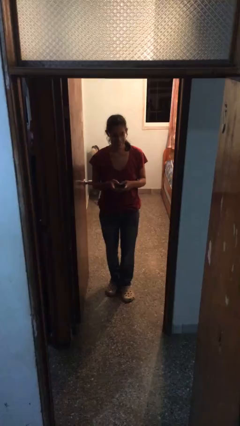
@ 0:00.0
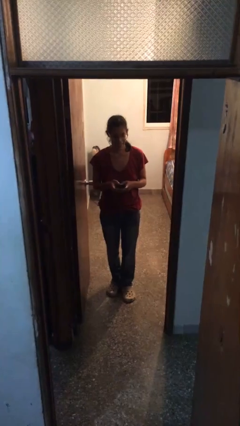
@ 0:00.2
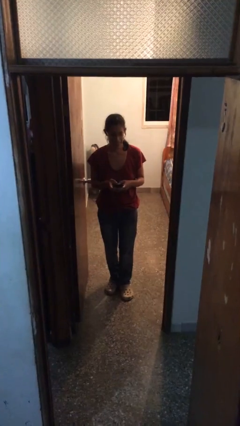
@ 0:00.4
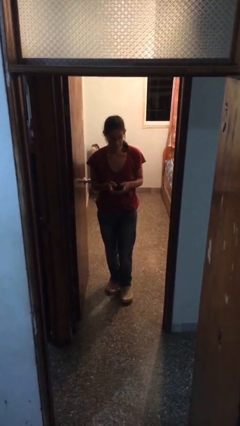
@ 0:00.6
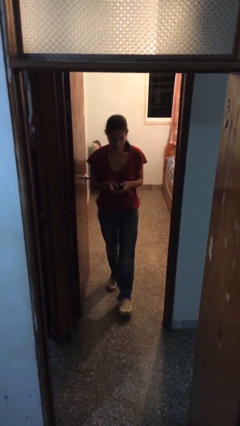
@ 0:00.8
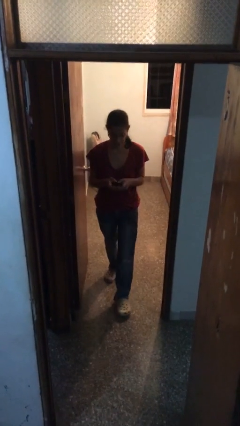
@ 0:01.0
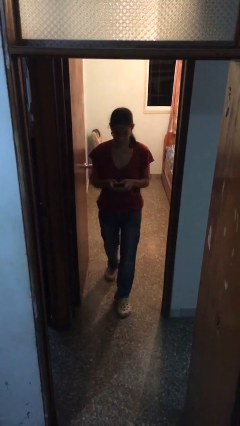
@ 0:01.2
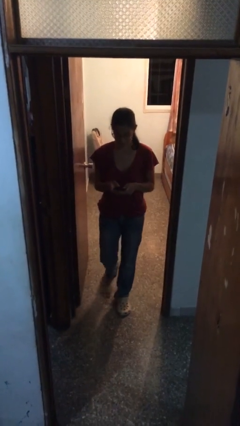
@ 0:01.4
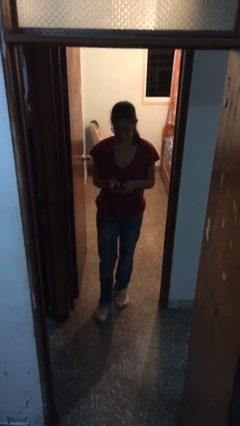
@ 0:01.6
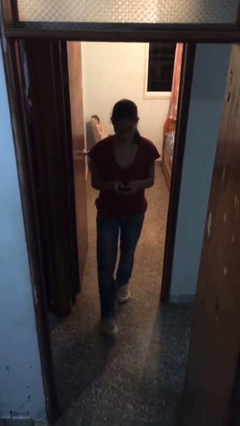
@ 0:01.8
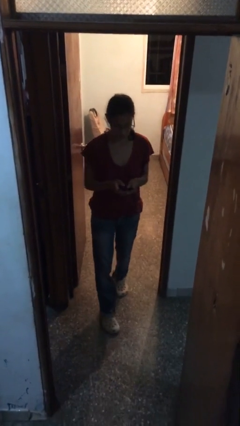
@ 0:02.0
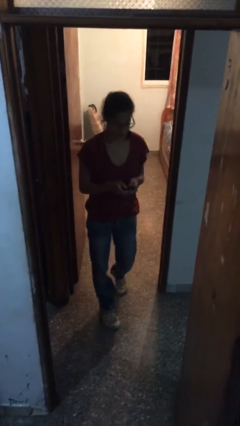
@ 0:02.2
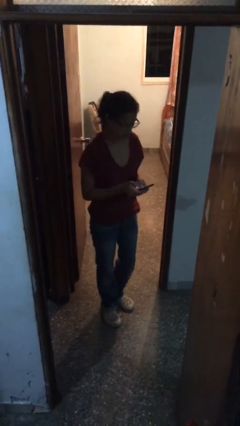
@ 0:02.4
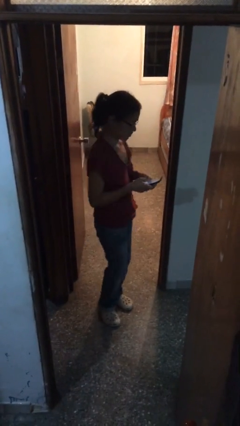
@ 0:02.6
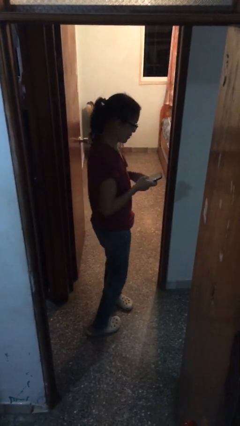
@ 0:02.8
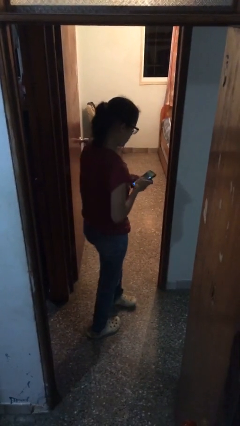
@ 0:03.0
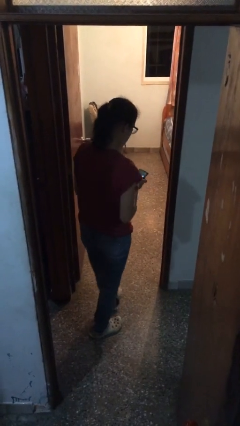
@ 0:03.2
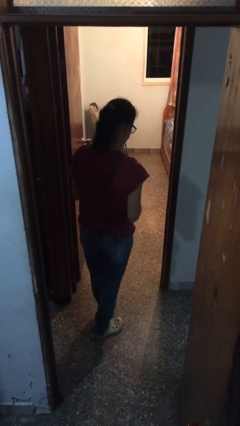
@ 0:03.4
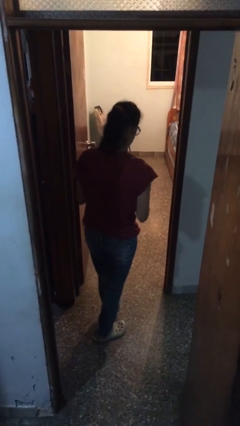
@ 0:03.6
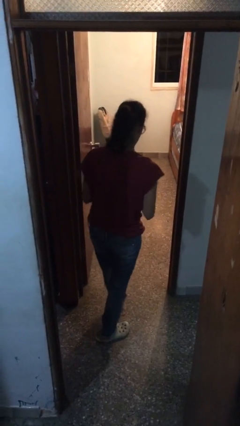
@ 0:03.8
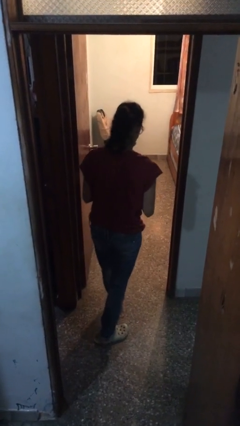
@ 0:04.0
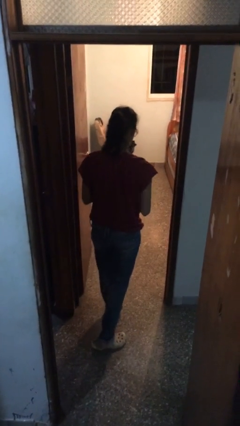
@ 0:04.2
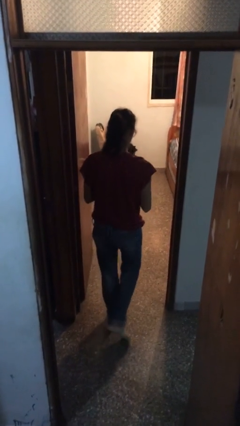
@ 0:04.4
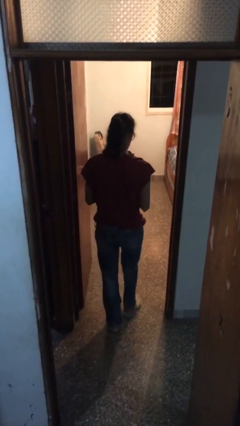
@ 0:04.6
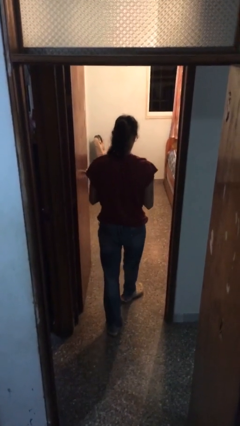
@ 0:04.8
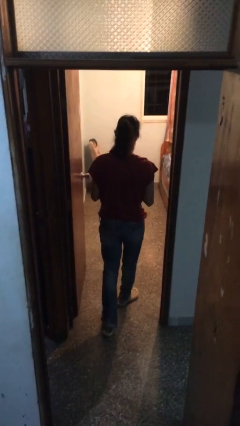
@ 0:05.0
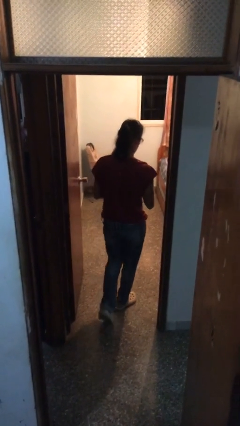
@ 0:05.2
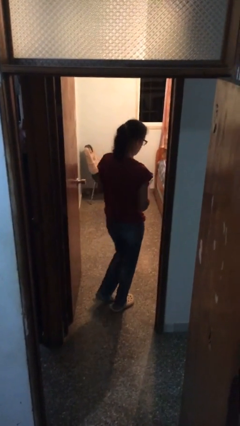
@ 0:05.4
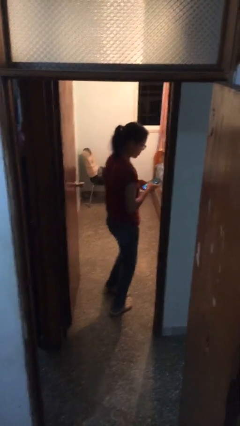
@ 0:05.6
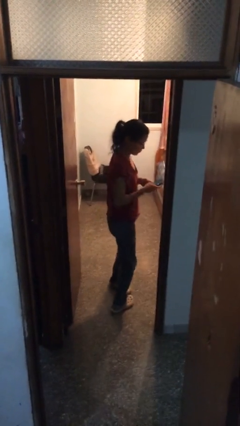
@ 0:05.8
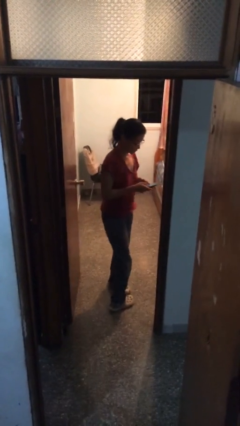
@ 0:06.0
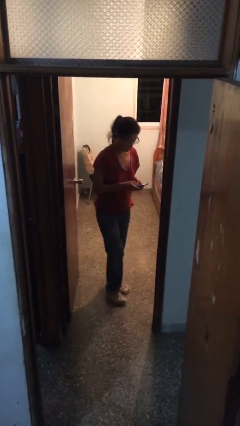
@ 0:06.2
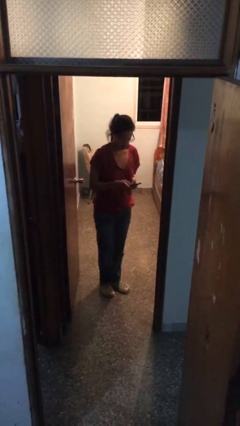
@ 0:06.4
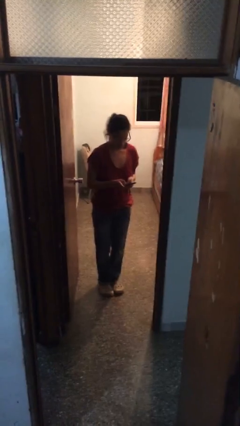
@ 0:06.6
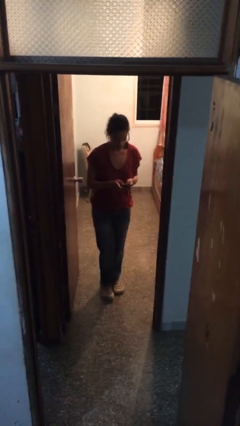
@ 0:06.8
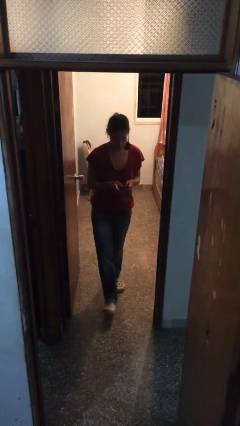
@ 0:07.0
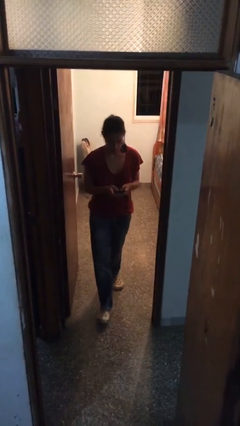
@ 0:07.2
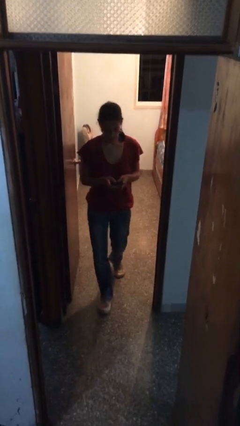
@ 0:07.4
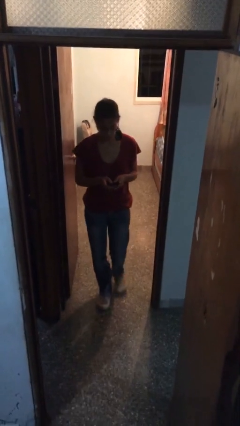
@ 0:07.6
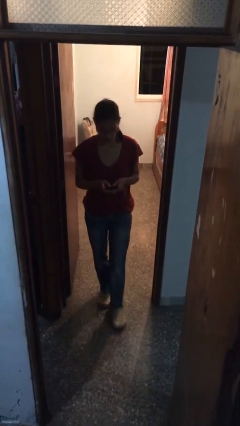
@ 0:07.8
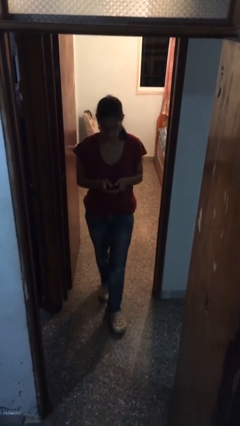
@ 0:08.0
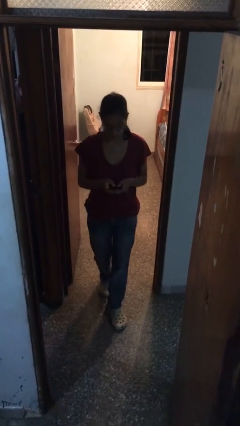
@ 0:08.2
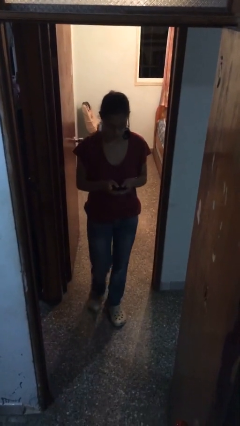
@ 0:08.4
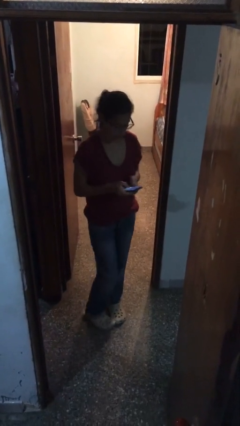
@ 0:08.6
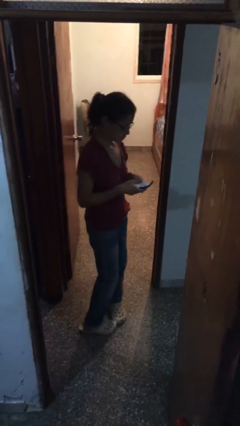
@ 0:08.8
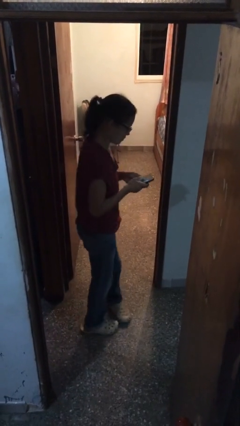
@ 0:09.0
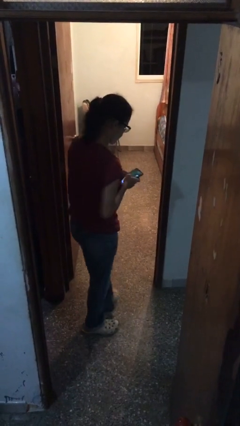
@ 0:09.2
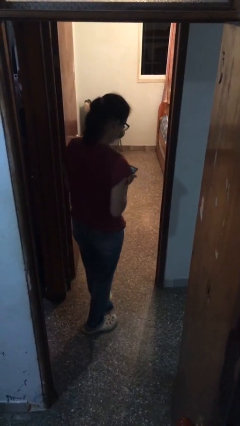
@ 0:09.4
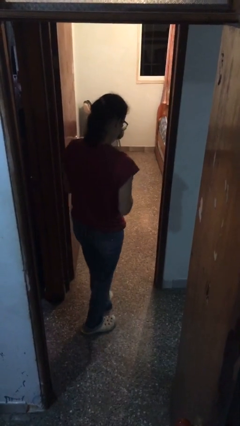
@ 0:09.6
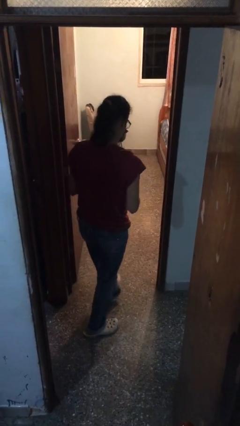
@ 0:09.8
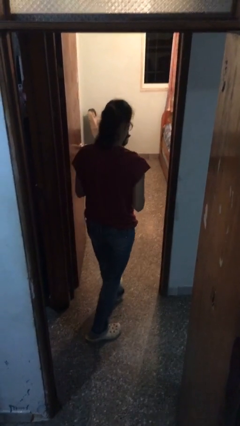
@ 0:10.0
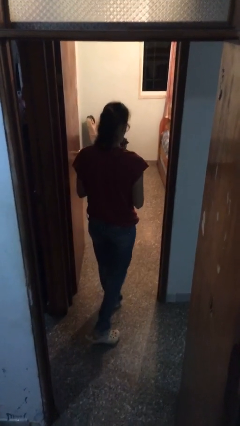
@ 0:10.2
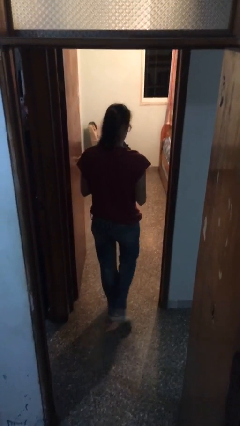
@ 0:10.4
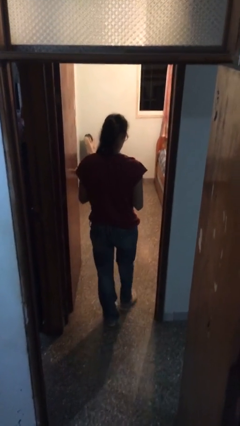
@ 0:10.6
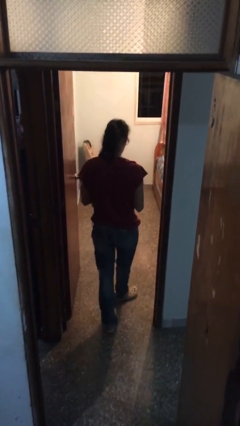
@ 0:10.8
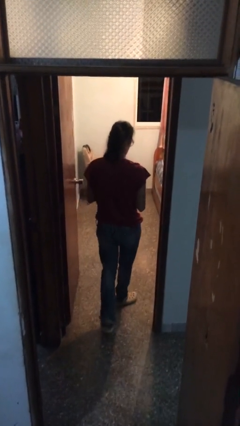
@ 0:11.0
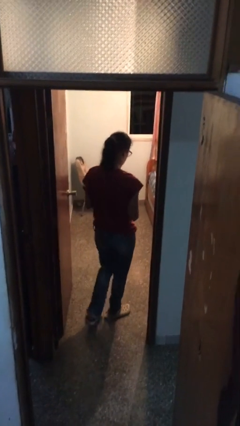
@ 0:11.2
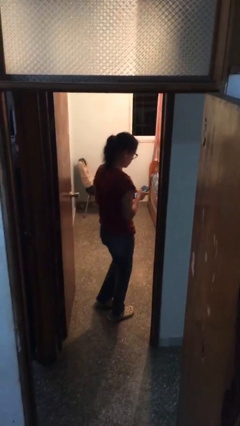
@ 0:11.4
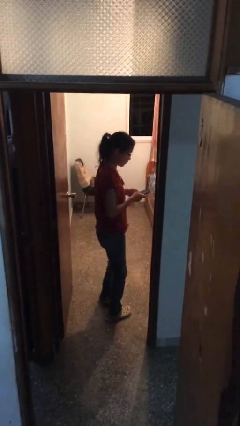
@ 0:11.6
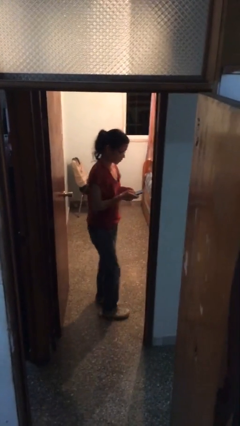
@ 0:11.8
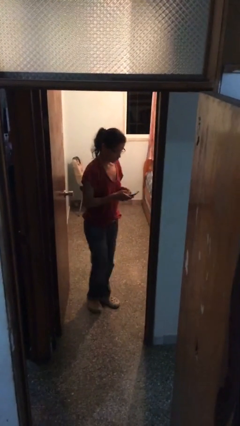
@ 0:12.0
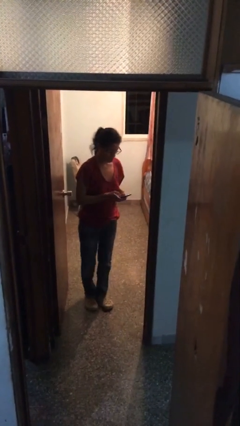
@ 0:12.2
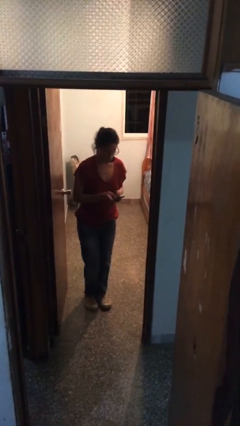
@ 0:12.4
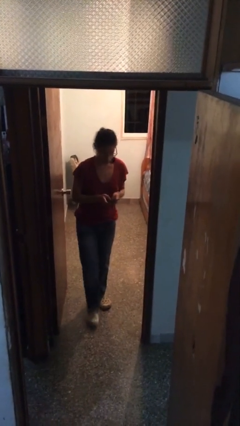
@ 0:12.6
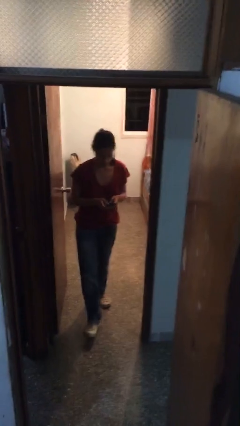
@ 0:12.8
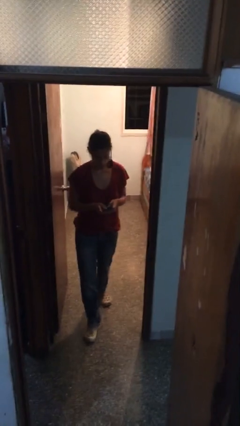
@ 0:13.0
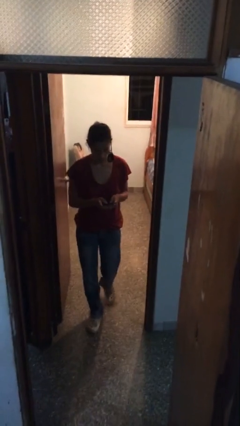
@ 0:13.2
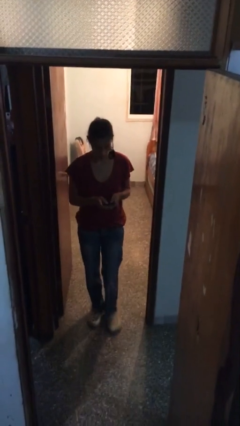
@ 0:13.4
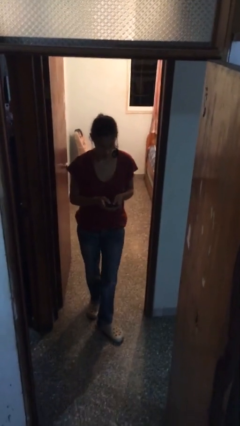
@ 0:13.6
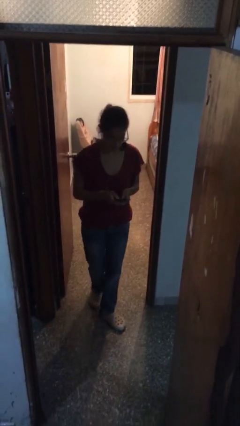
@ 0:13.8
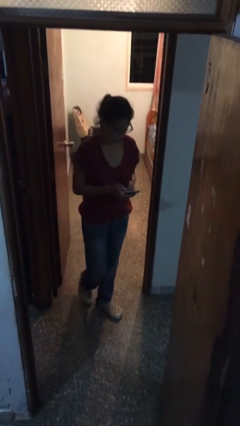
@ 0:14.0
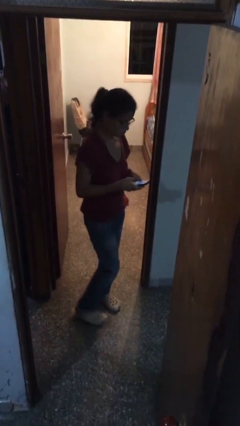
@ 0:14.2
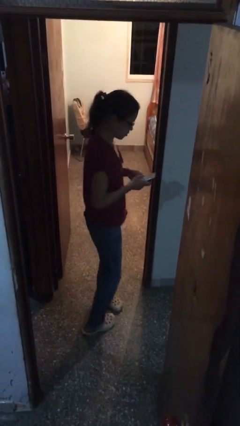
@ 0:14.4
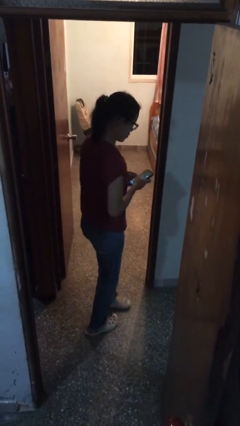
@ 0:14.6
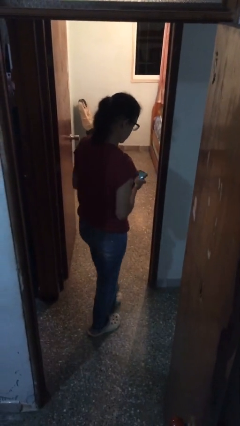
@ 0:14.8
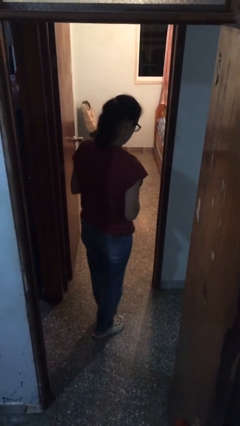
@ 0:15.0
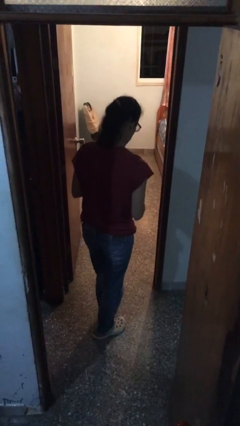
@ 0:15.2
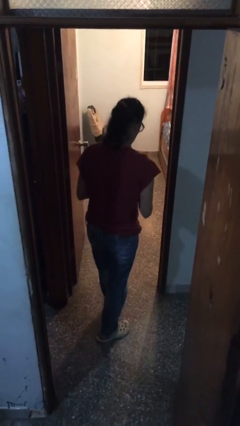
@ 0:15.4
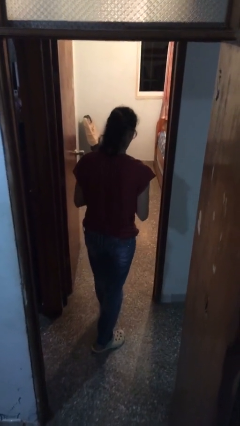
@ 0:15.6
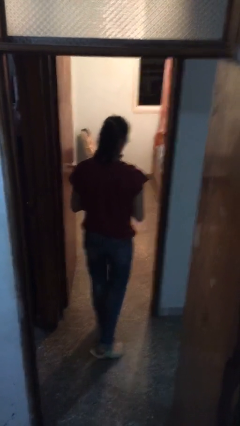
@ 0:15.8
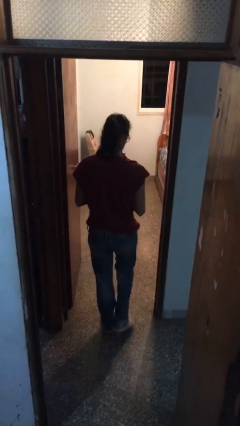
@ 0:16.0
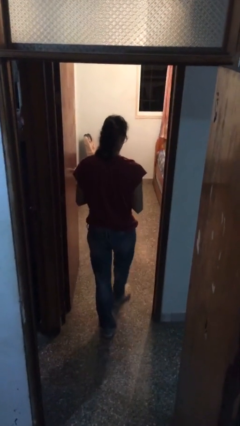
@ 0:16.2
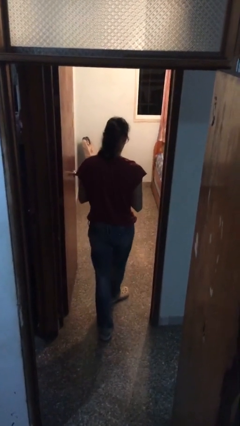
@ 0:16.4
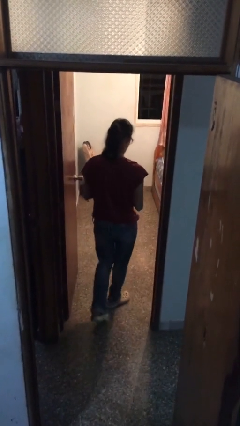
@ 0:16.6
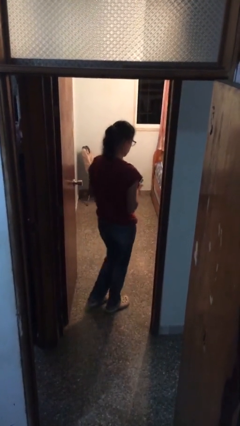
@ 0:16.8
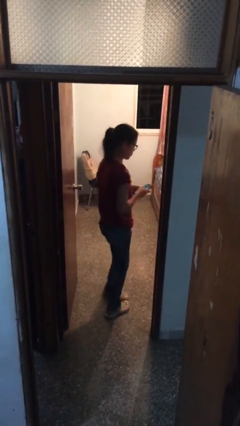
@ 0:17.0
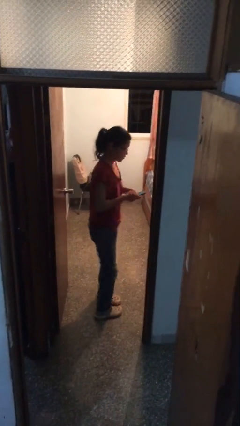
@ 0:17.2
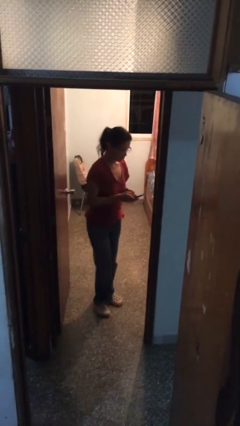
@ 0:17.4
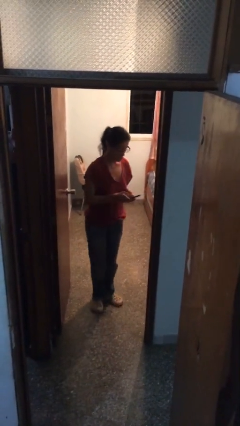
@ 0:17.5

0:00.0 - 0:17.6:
person texts on phone

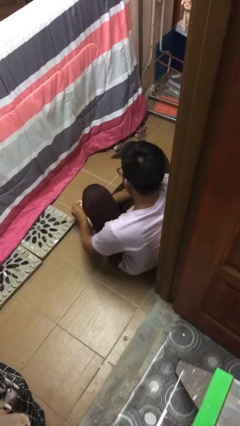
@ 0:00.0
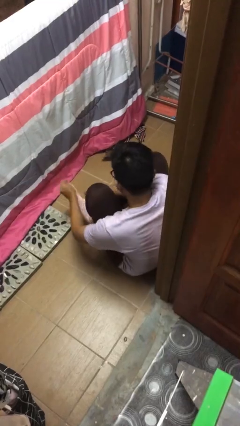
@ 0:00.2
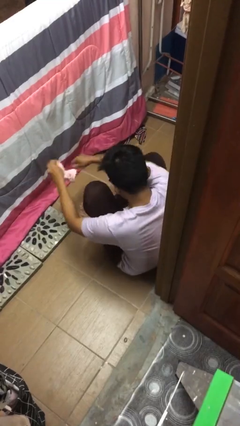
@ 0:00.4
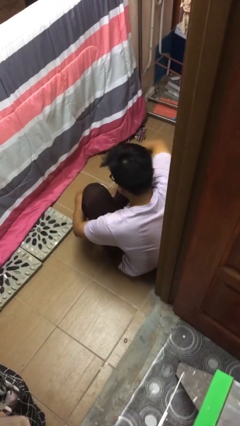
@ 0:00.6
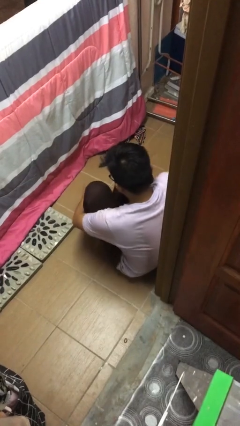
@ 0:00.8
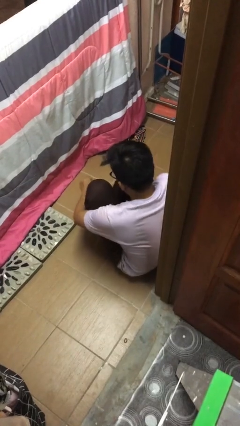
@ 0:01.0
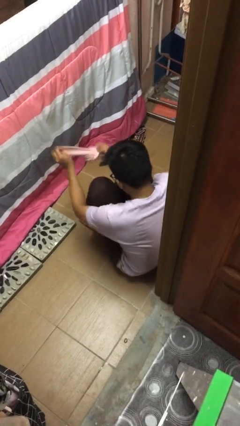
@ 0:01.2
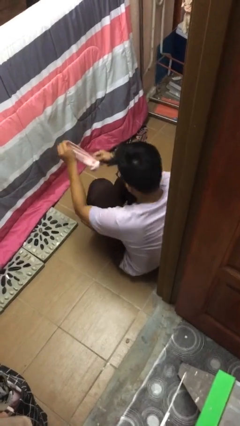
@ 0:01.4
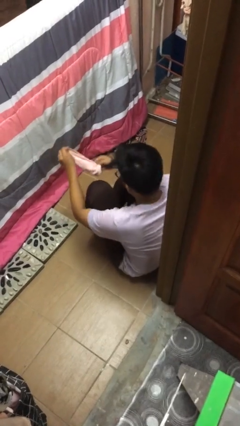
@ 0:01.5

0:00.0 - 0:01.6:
person takes off socks
